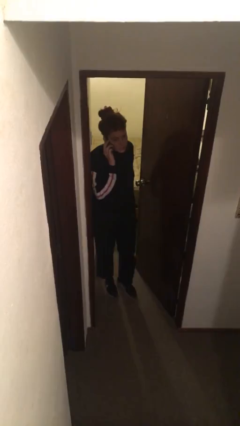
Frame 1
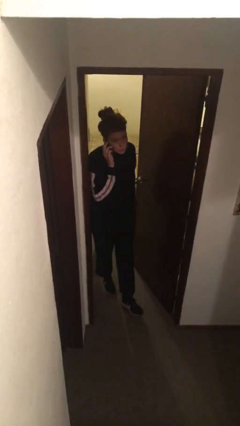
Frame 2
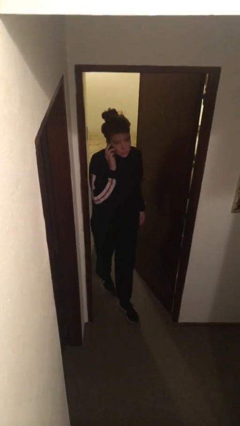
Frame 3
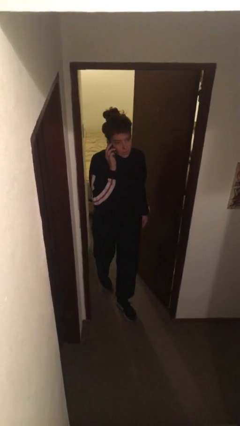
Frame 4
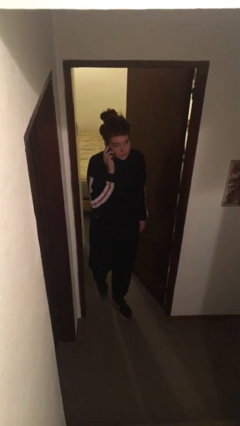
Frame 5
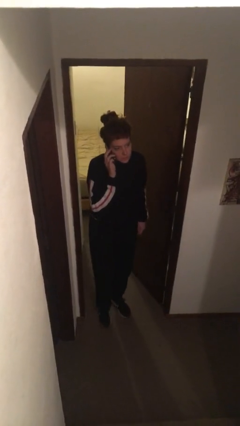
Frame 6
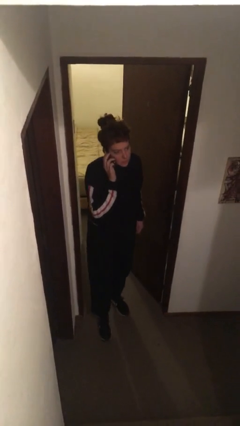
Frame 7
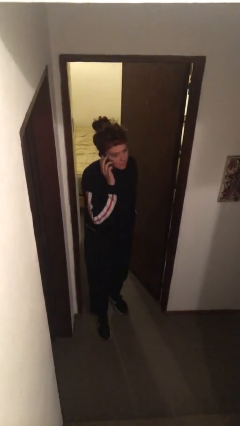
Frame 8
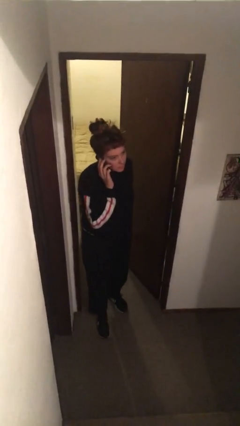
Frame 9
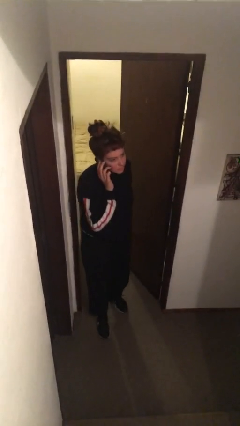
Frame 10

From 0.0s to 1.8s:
person enters scene through structure

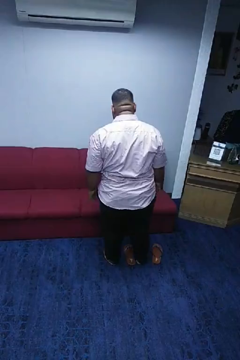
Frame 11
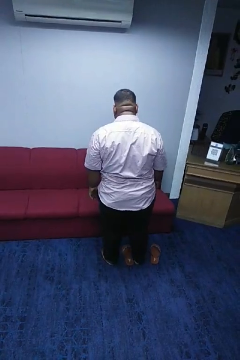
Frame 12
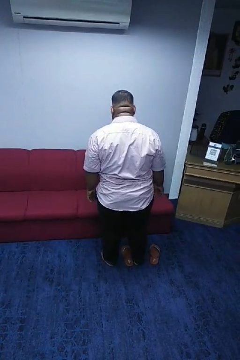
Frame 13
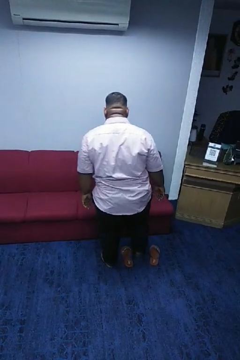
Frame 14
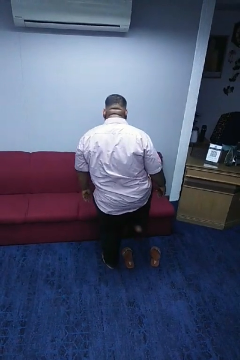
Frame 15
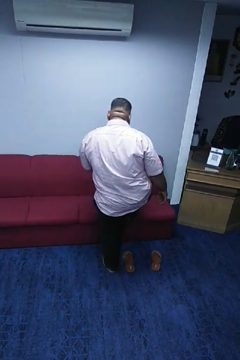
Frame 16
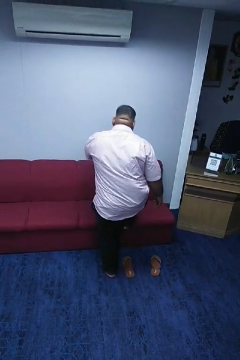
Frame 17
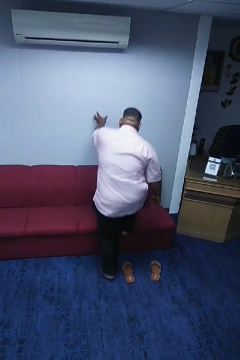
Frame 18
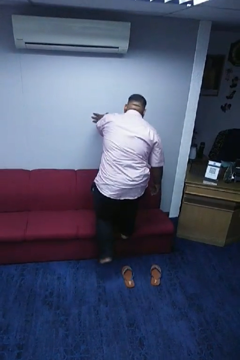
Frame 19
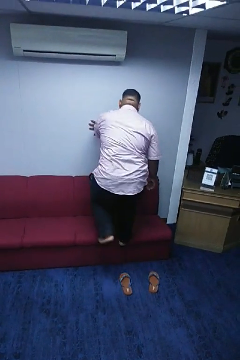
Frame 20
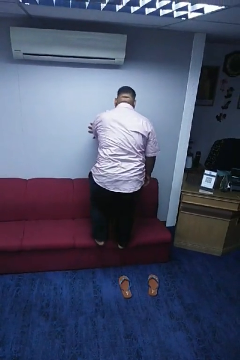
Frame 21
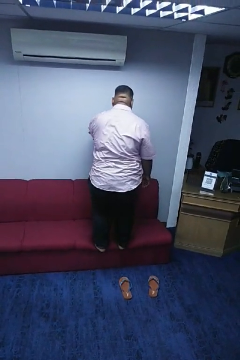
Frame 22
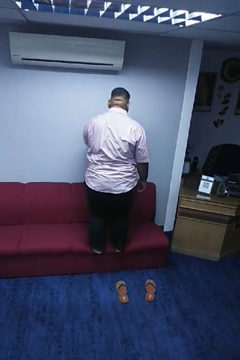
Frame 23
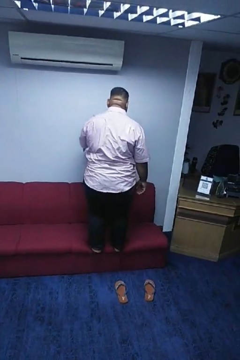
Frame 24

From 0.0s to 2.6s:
person climbs on couch

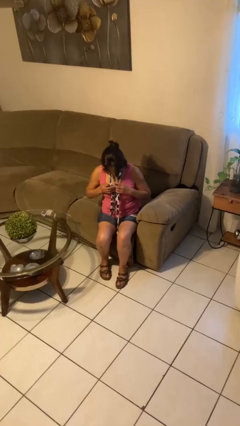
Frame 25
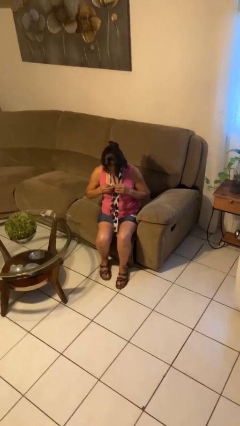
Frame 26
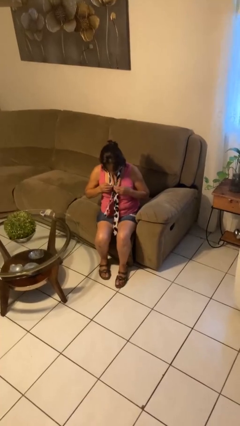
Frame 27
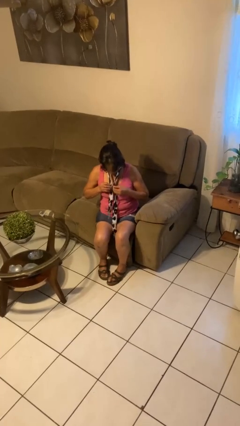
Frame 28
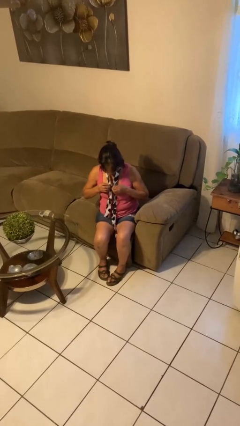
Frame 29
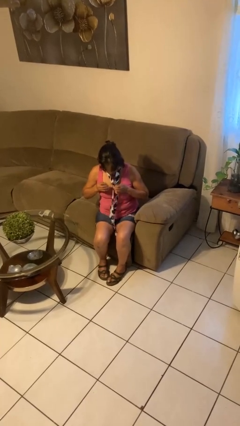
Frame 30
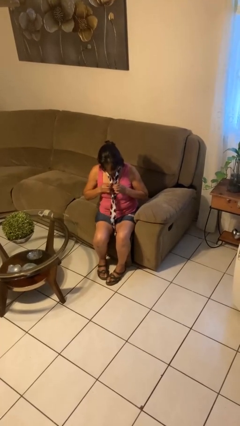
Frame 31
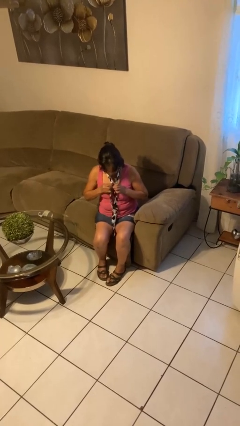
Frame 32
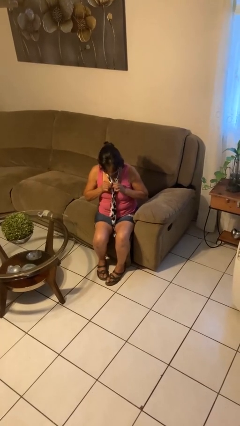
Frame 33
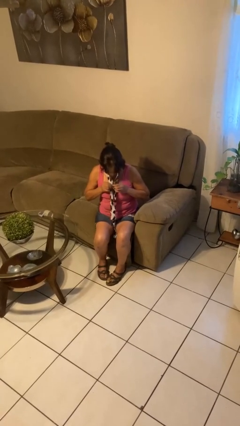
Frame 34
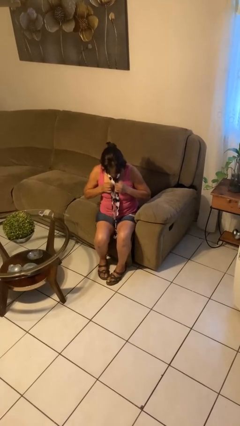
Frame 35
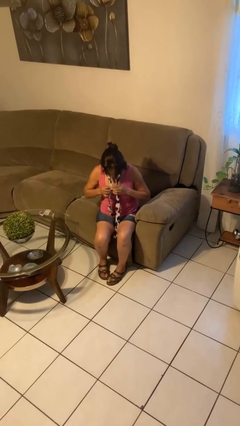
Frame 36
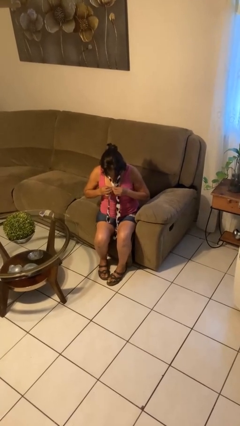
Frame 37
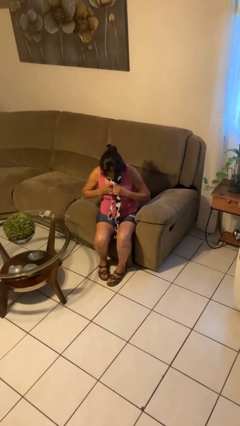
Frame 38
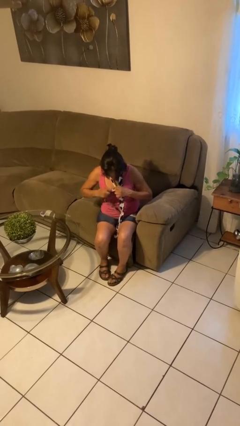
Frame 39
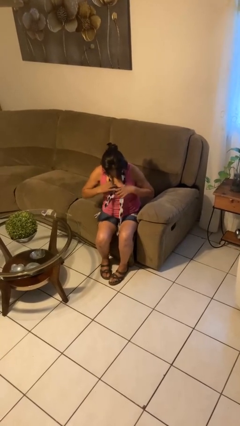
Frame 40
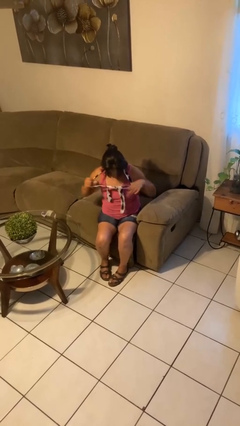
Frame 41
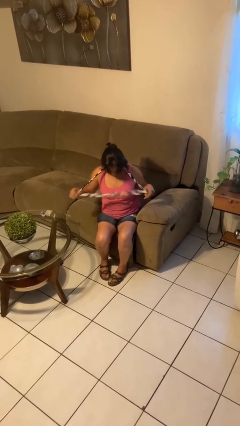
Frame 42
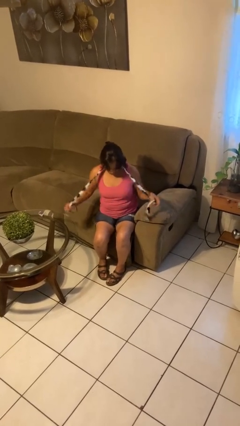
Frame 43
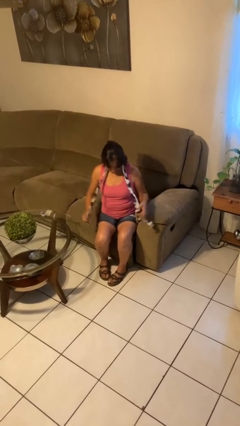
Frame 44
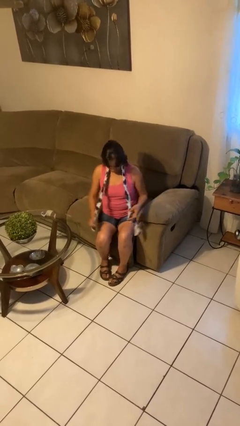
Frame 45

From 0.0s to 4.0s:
person takes off necktie

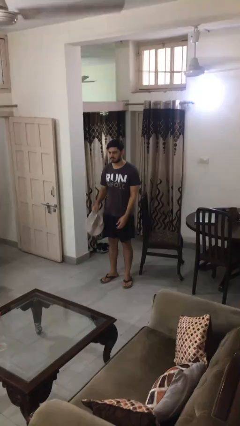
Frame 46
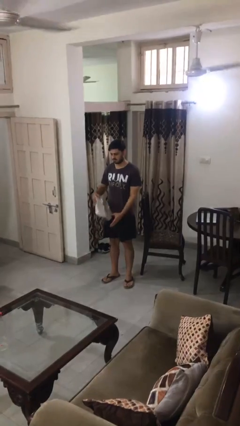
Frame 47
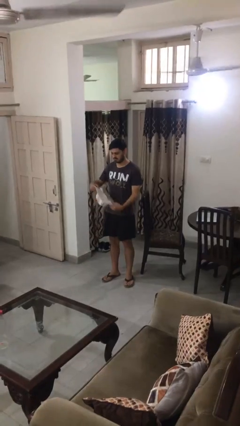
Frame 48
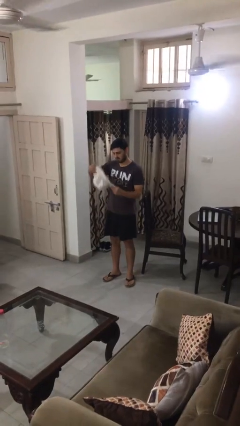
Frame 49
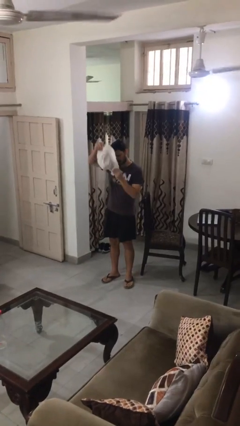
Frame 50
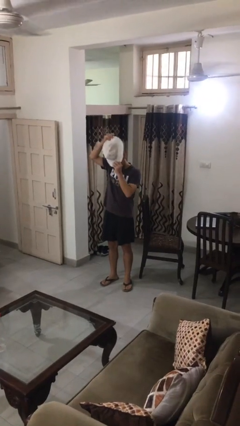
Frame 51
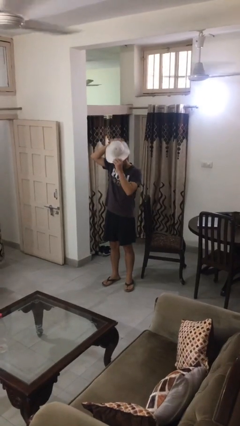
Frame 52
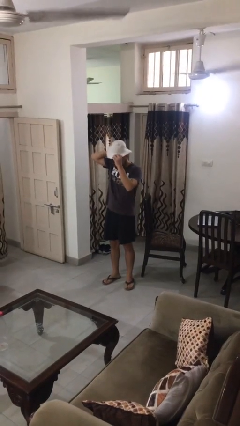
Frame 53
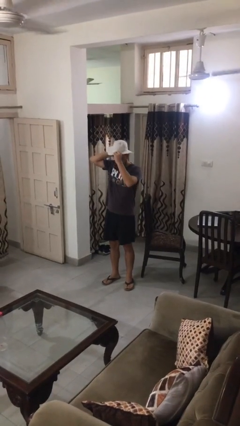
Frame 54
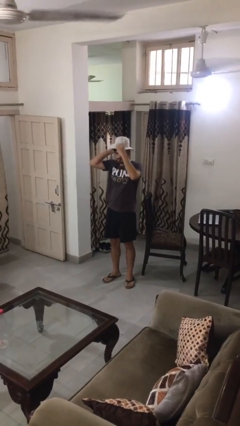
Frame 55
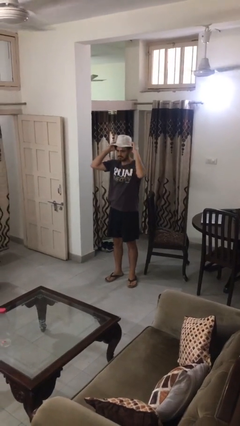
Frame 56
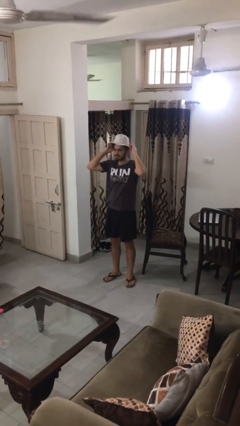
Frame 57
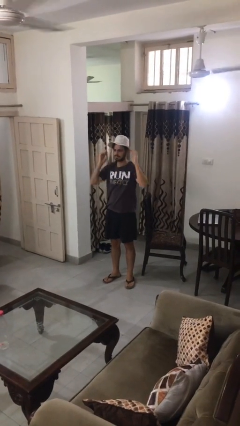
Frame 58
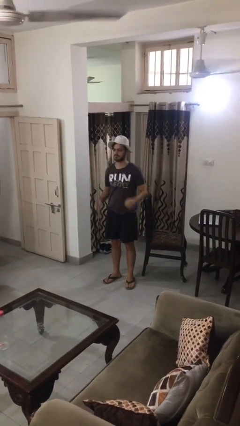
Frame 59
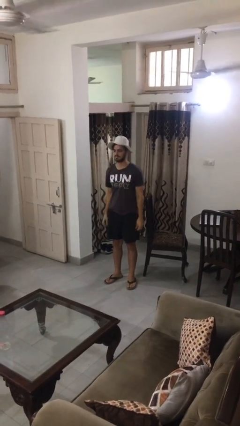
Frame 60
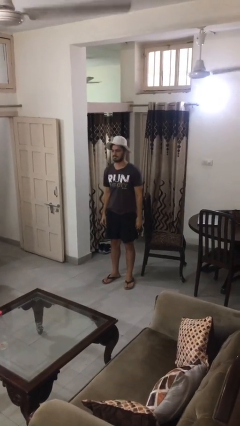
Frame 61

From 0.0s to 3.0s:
person puts on hat

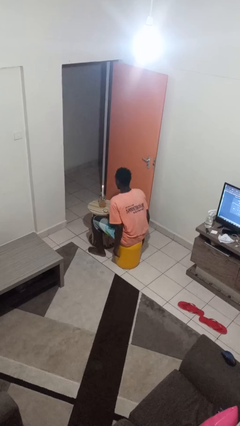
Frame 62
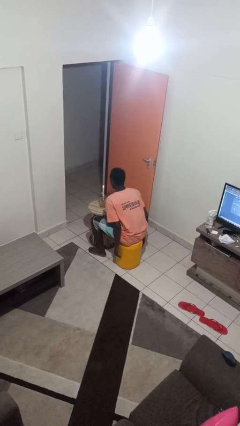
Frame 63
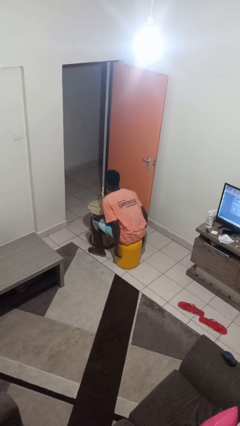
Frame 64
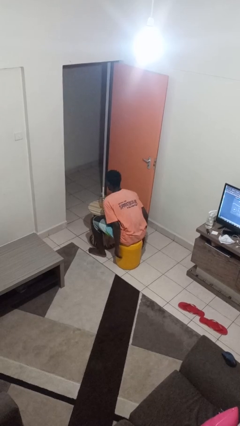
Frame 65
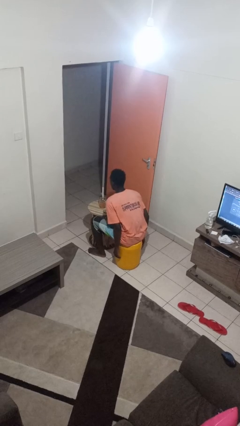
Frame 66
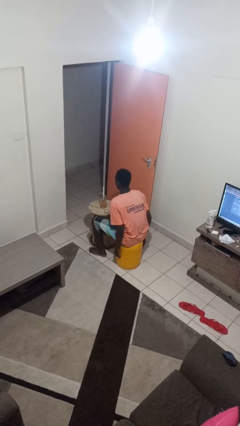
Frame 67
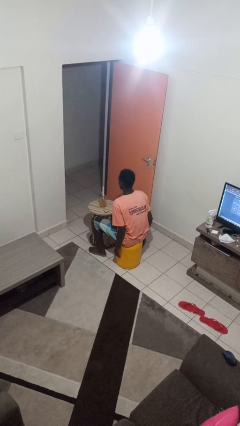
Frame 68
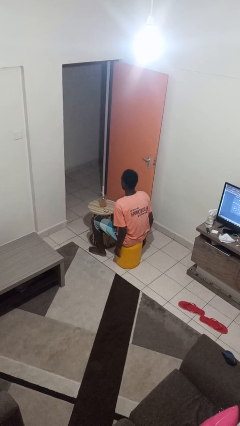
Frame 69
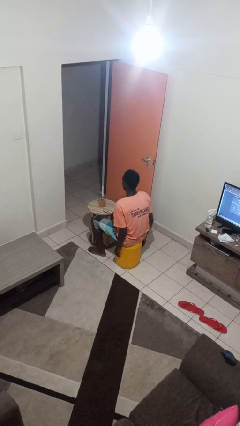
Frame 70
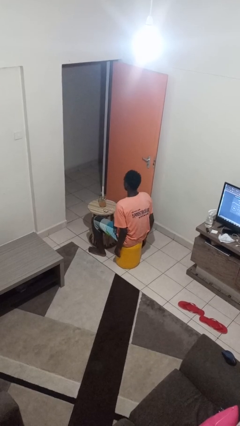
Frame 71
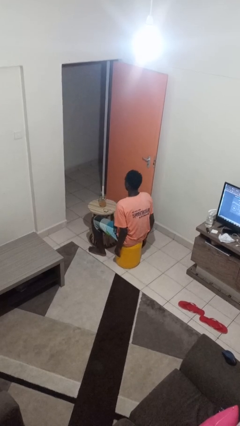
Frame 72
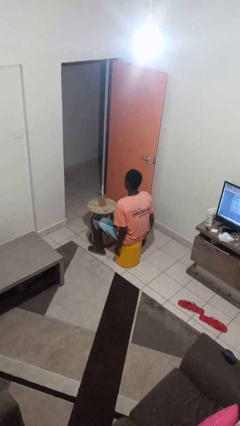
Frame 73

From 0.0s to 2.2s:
person extinguishes candle

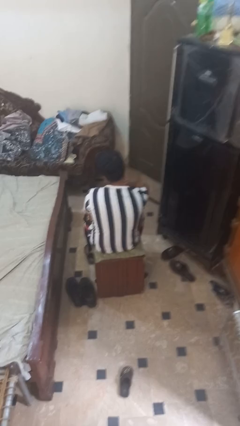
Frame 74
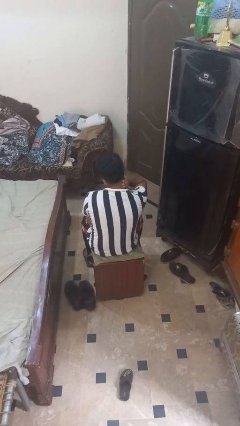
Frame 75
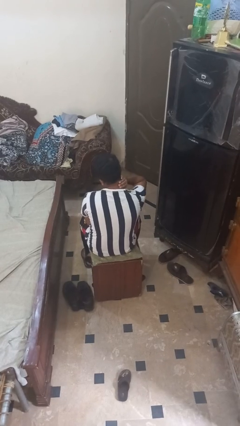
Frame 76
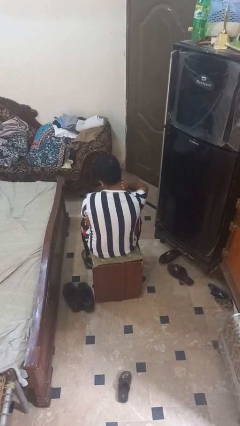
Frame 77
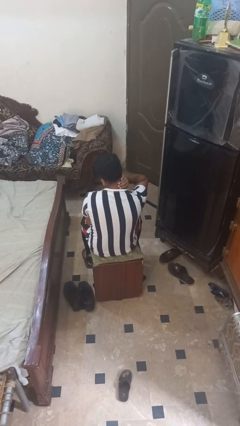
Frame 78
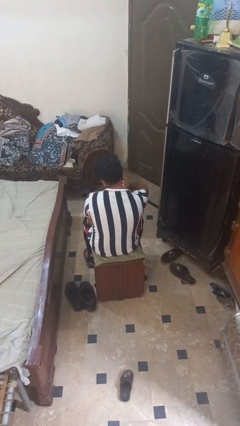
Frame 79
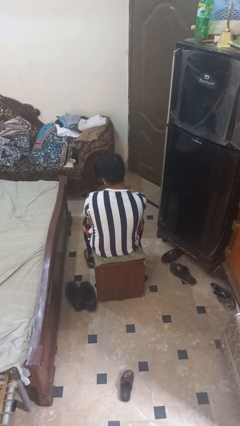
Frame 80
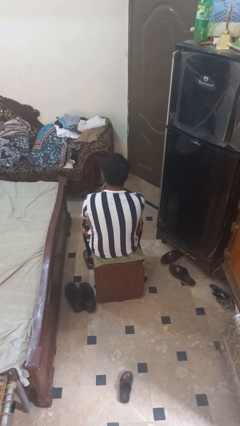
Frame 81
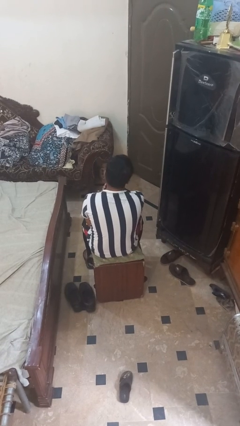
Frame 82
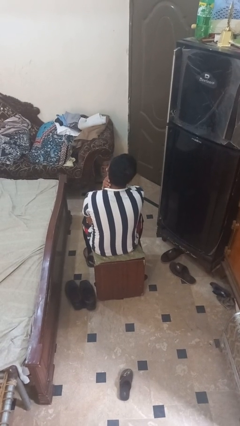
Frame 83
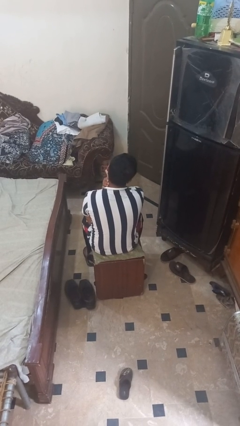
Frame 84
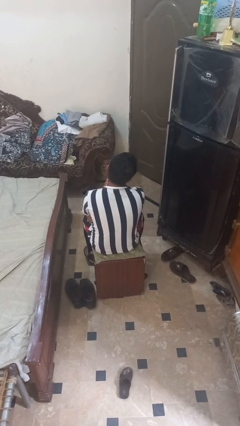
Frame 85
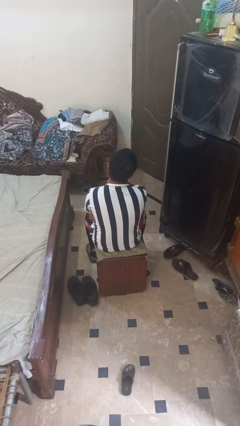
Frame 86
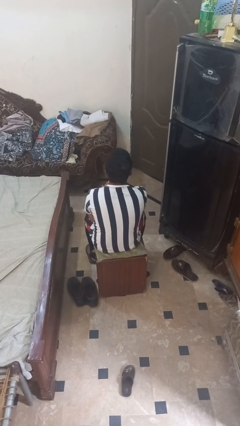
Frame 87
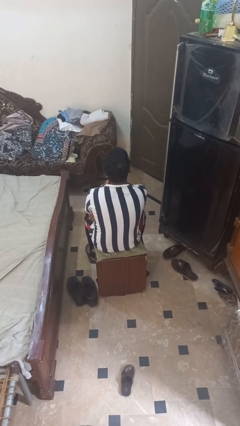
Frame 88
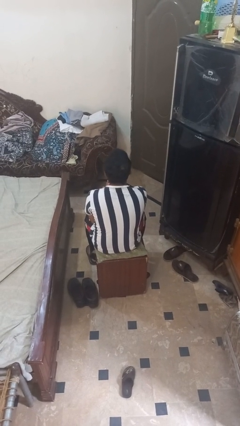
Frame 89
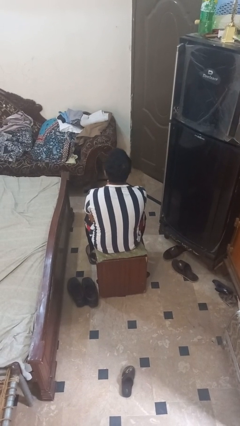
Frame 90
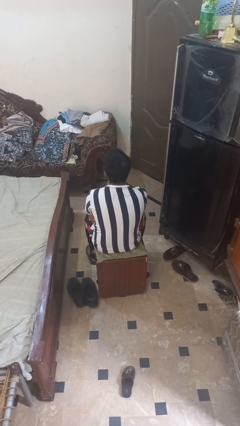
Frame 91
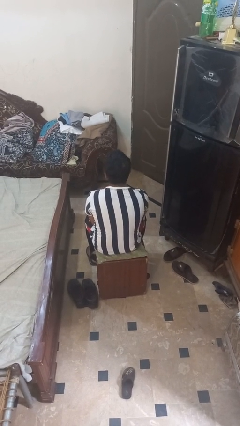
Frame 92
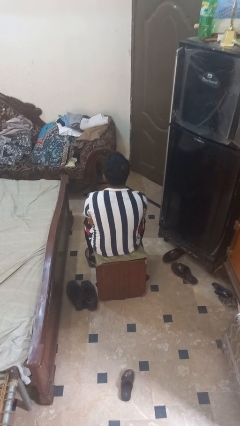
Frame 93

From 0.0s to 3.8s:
person rubs neck

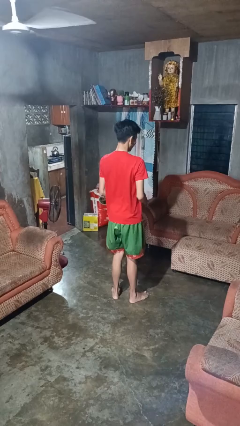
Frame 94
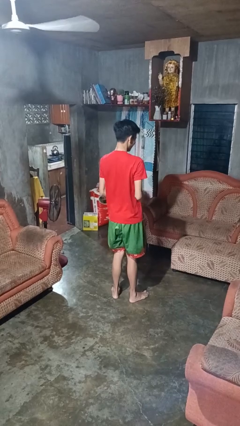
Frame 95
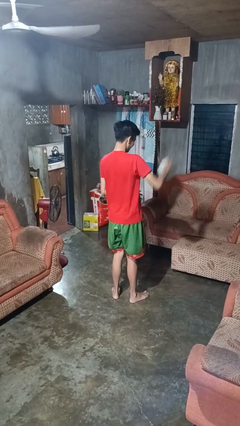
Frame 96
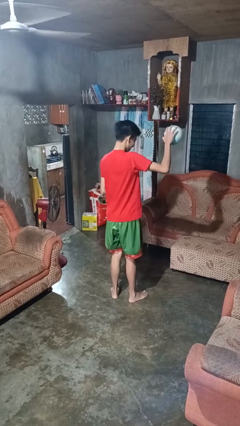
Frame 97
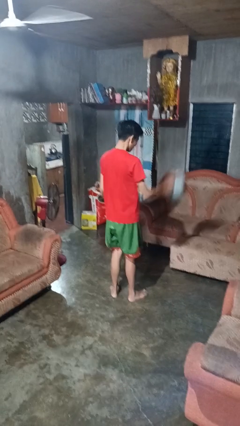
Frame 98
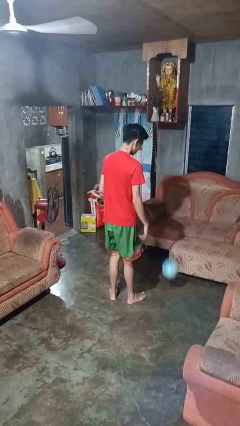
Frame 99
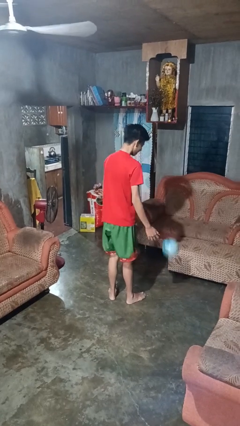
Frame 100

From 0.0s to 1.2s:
person bounces ball on floor
